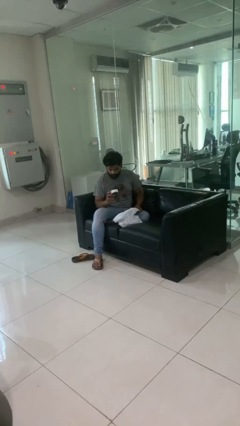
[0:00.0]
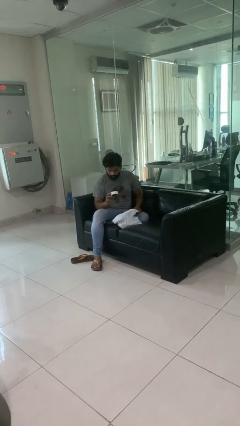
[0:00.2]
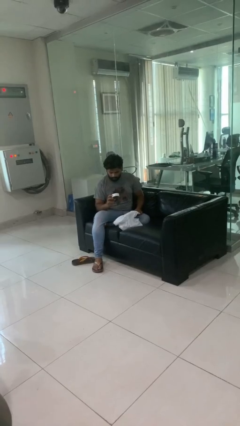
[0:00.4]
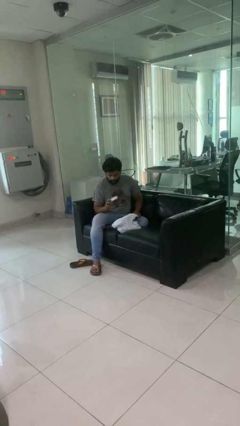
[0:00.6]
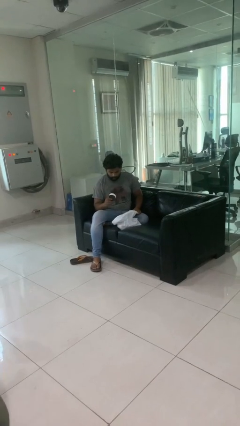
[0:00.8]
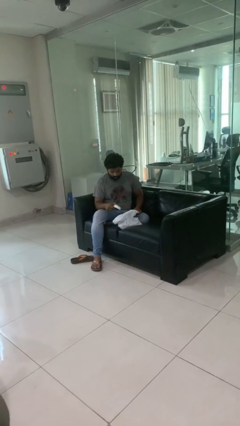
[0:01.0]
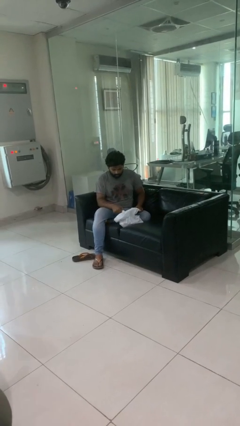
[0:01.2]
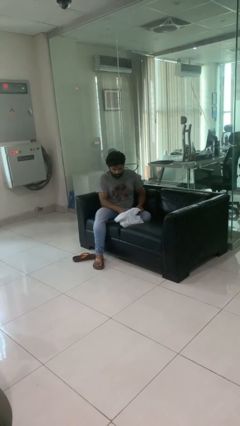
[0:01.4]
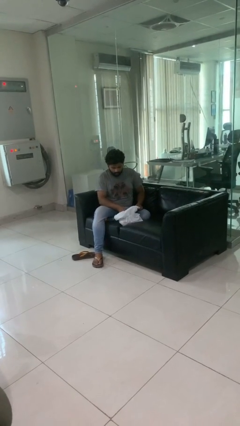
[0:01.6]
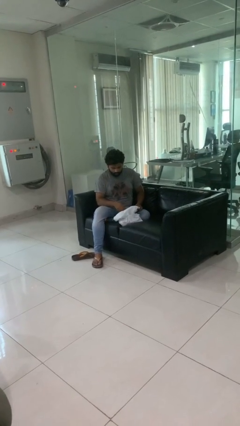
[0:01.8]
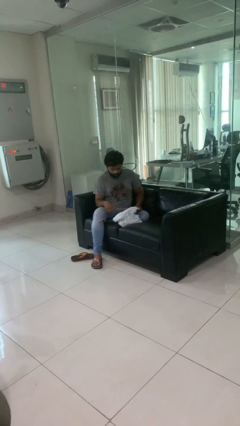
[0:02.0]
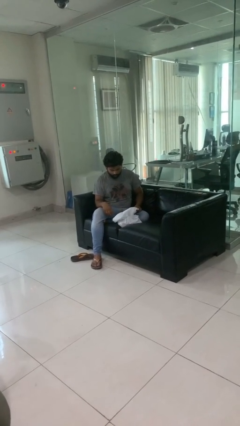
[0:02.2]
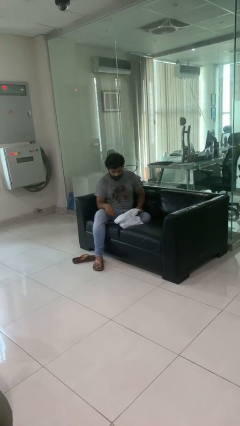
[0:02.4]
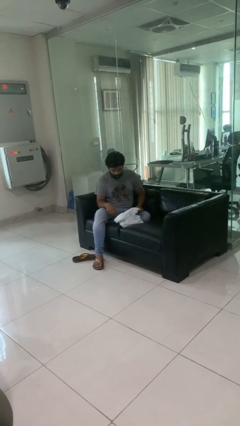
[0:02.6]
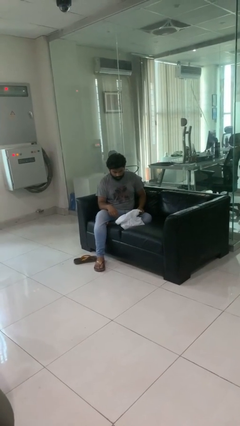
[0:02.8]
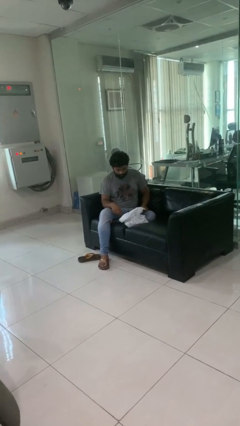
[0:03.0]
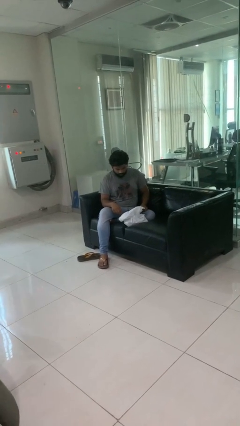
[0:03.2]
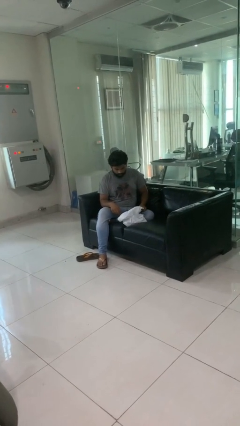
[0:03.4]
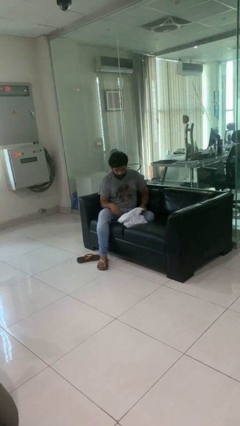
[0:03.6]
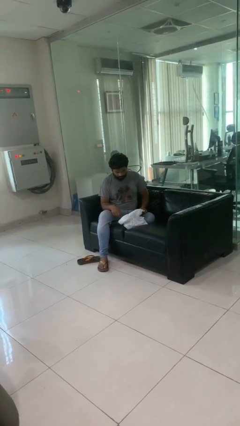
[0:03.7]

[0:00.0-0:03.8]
person puts object into bag

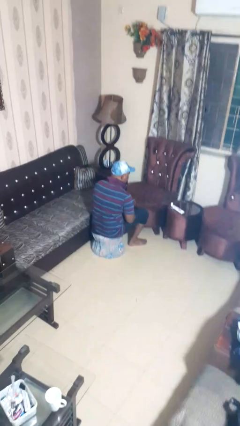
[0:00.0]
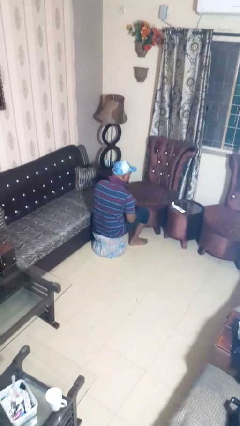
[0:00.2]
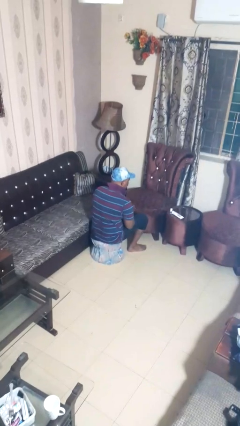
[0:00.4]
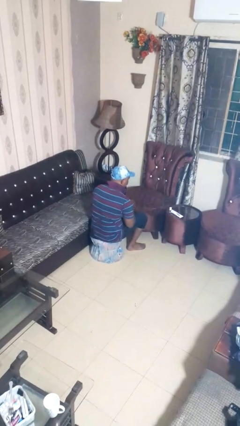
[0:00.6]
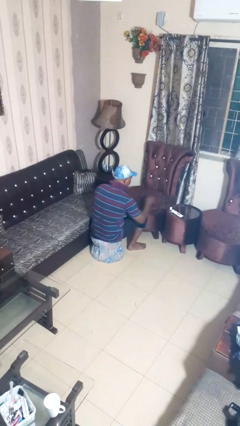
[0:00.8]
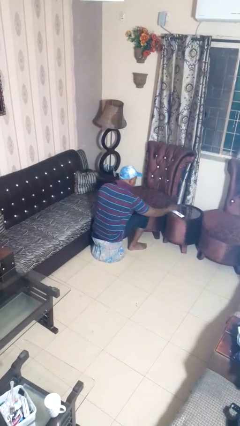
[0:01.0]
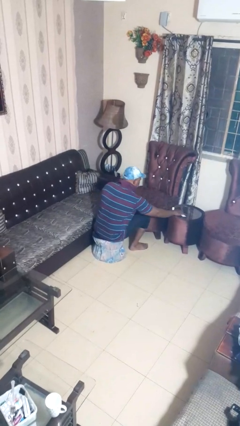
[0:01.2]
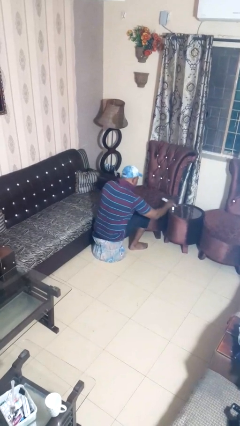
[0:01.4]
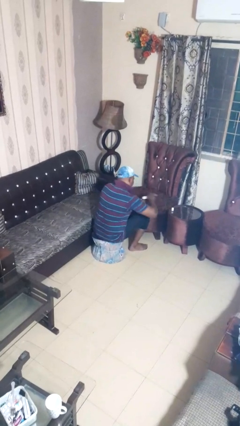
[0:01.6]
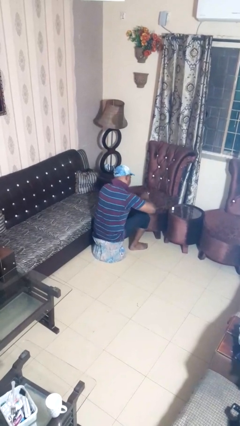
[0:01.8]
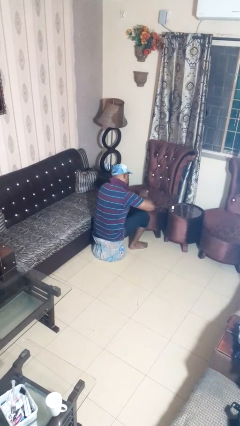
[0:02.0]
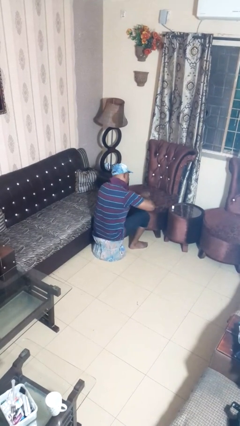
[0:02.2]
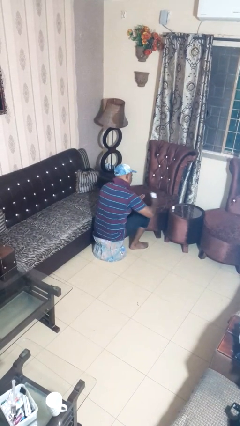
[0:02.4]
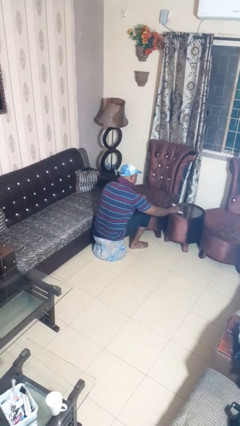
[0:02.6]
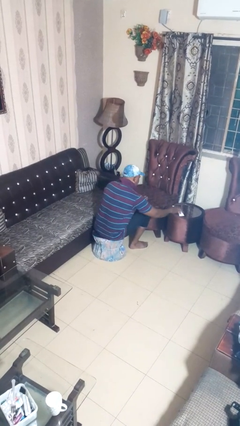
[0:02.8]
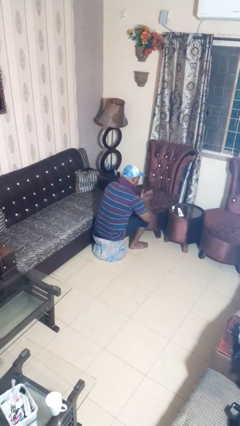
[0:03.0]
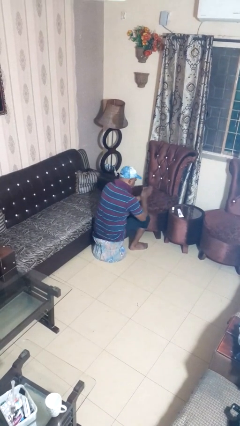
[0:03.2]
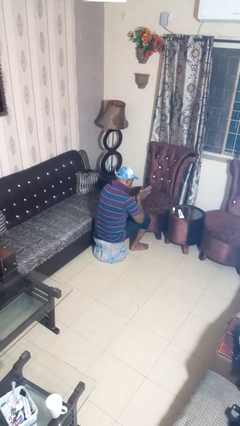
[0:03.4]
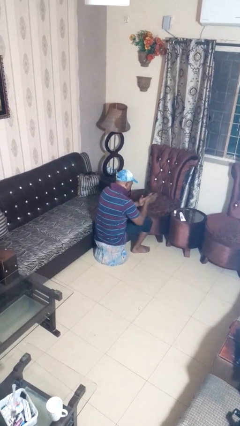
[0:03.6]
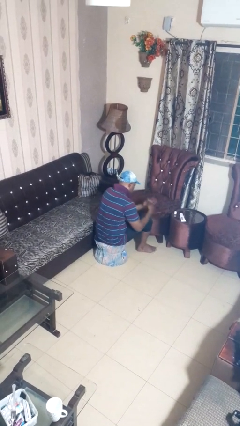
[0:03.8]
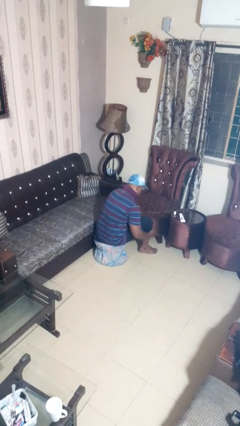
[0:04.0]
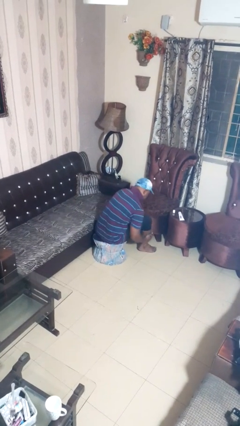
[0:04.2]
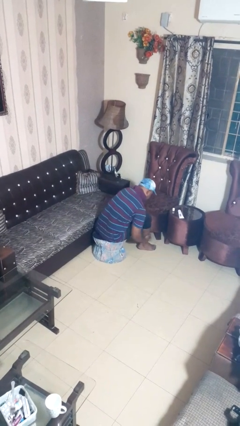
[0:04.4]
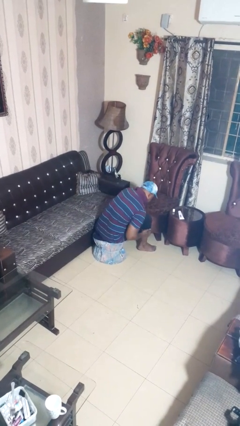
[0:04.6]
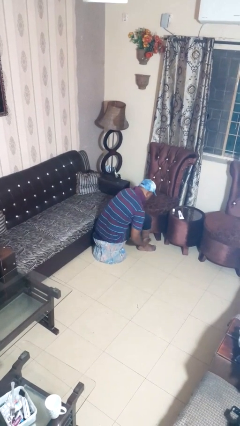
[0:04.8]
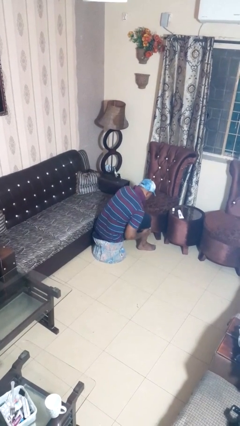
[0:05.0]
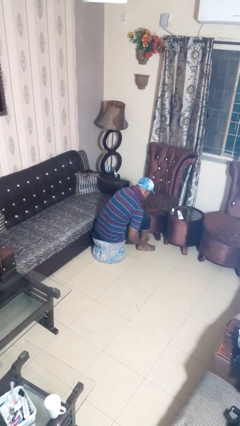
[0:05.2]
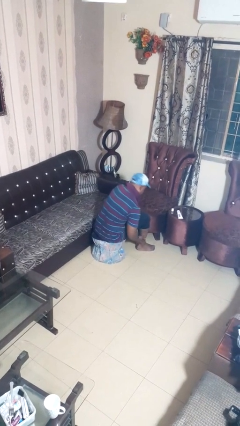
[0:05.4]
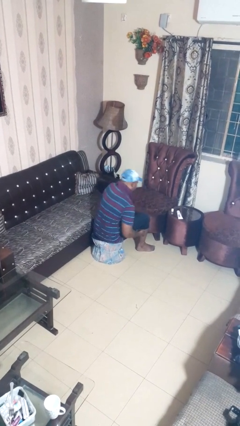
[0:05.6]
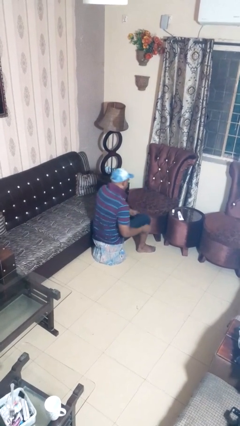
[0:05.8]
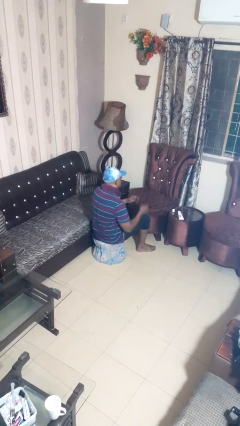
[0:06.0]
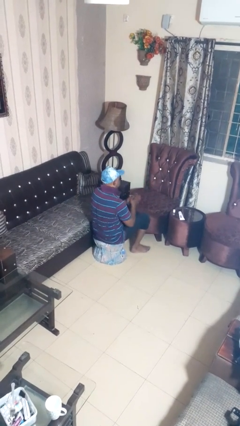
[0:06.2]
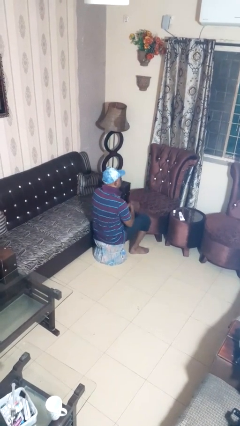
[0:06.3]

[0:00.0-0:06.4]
person applies sunscreen

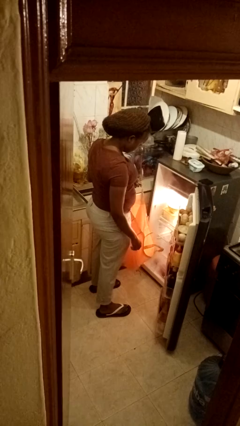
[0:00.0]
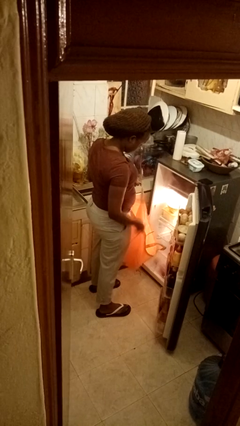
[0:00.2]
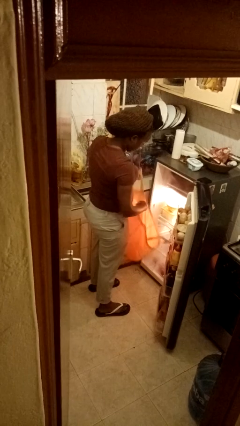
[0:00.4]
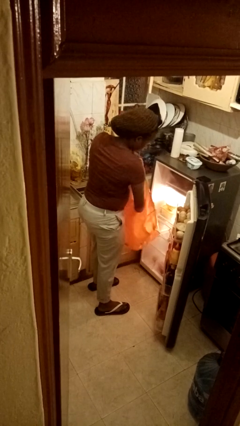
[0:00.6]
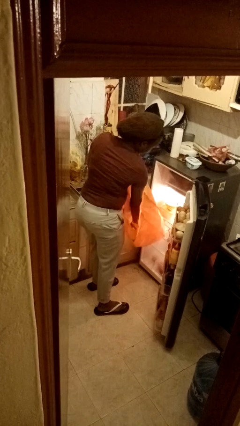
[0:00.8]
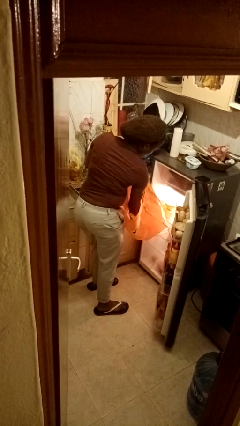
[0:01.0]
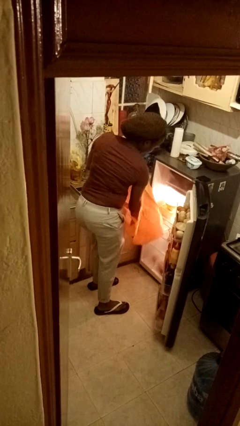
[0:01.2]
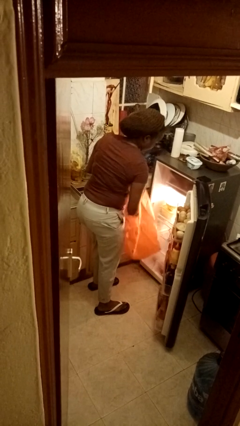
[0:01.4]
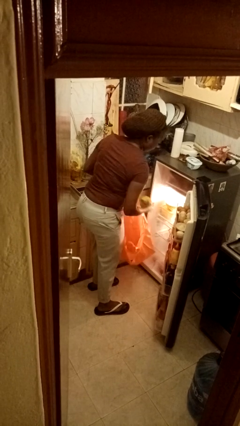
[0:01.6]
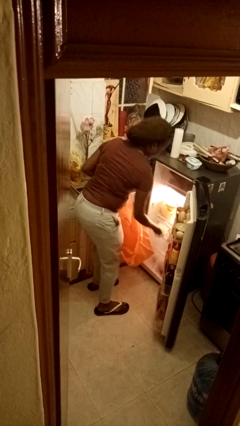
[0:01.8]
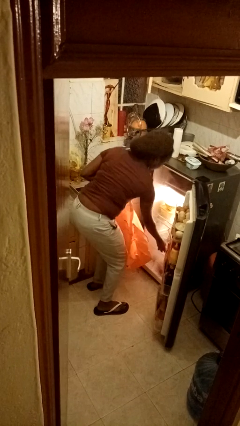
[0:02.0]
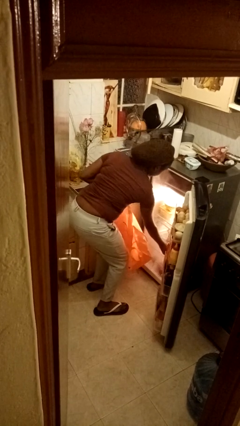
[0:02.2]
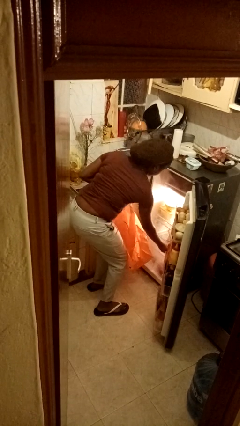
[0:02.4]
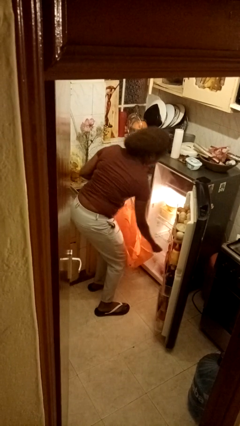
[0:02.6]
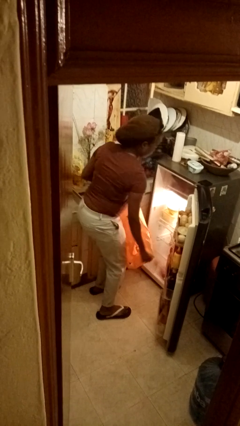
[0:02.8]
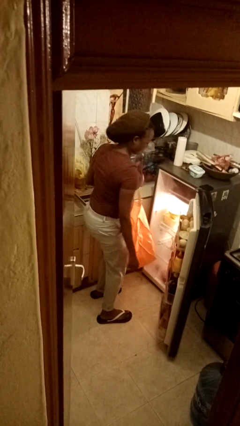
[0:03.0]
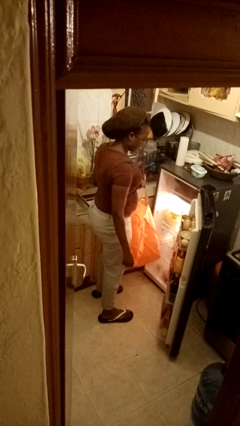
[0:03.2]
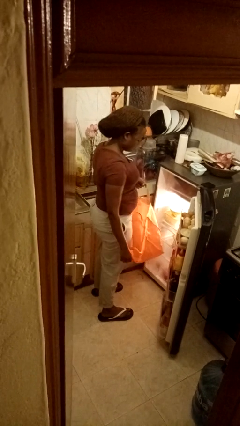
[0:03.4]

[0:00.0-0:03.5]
person loads groceries into refrigerator

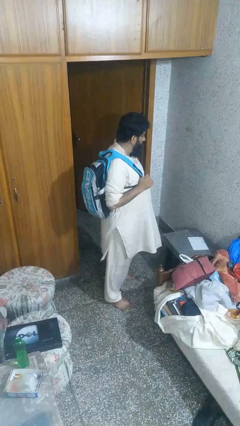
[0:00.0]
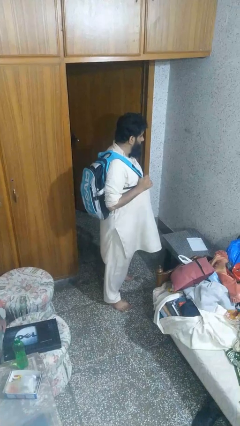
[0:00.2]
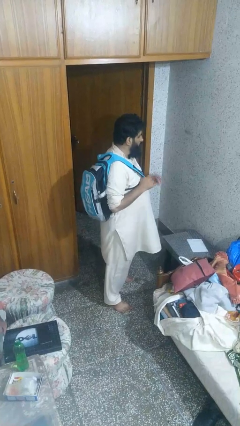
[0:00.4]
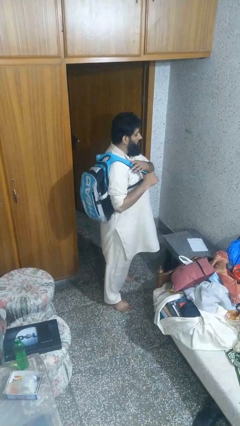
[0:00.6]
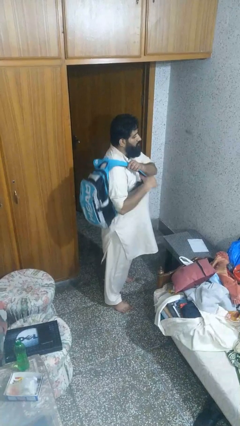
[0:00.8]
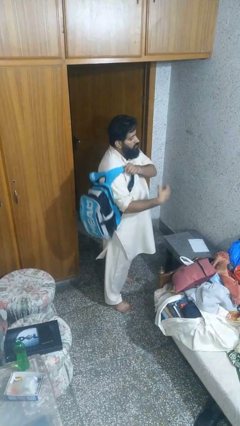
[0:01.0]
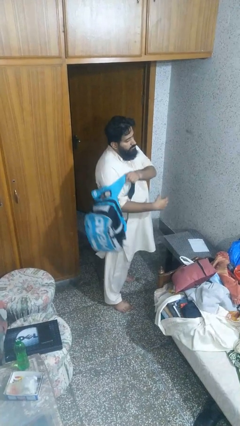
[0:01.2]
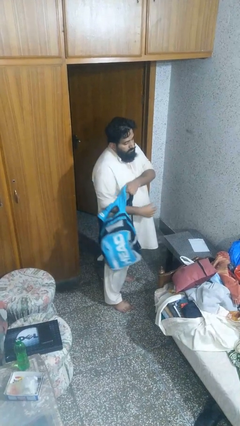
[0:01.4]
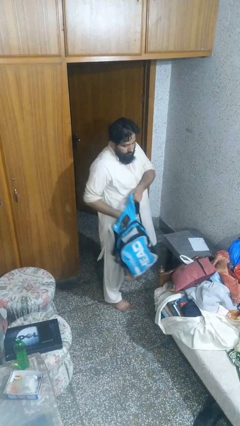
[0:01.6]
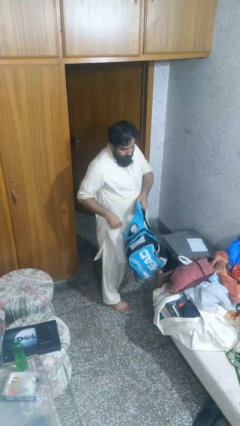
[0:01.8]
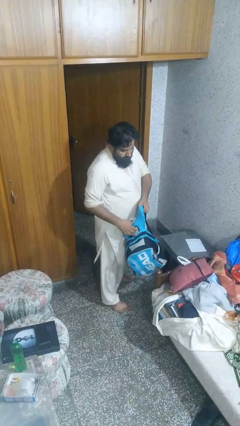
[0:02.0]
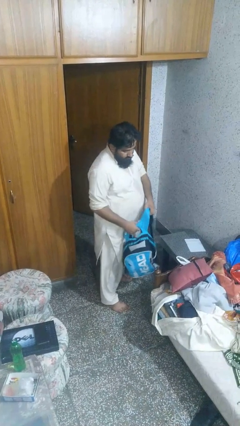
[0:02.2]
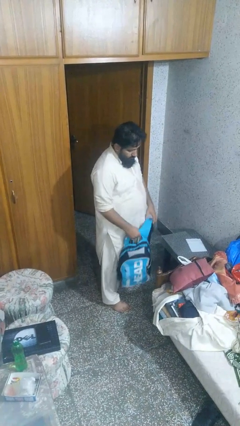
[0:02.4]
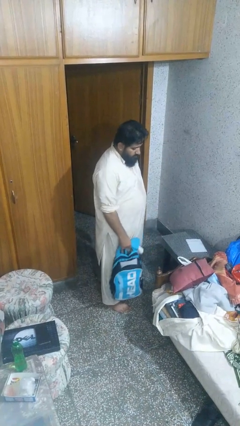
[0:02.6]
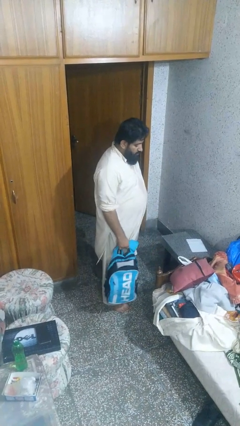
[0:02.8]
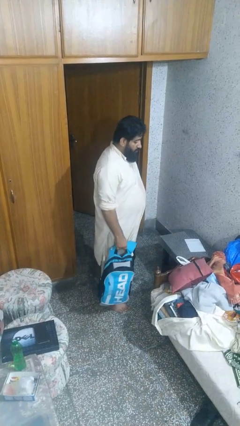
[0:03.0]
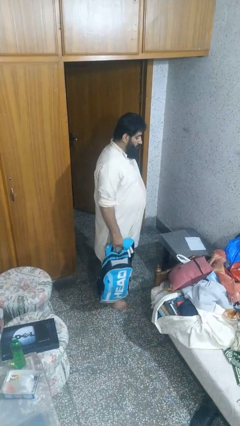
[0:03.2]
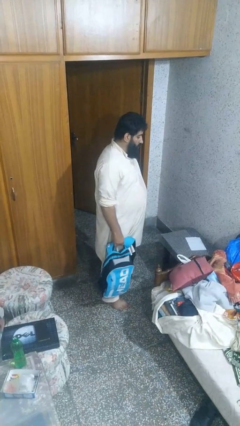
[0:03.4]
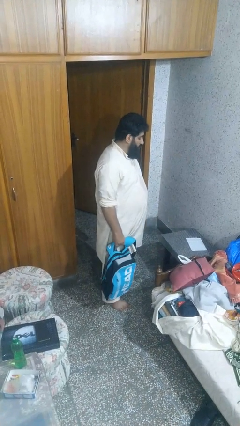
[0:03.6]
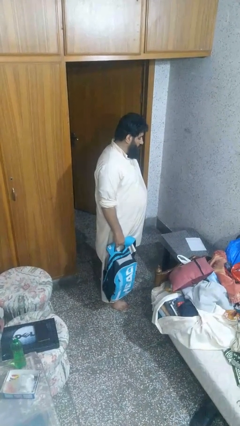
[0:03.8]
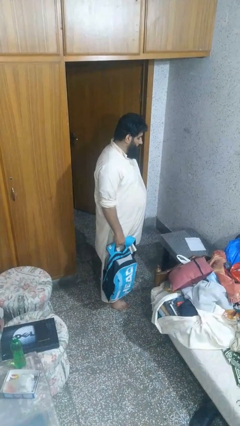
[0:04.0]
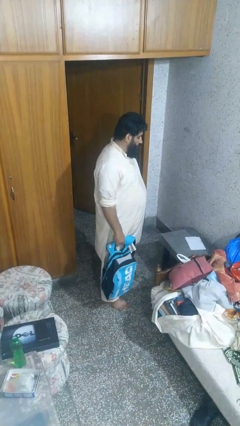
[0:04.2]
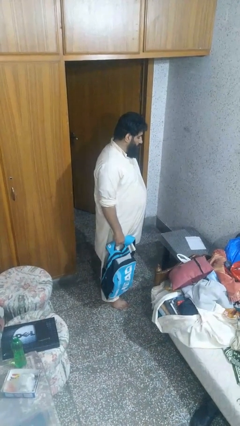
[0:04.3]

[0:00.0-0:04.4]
person takes off backpack

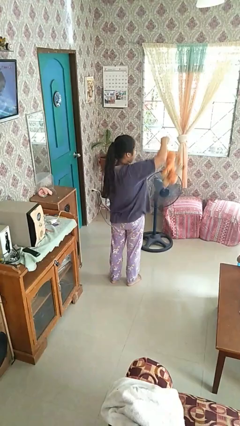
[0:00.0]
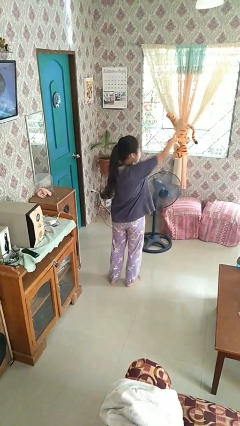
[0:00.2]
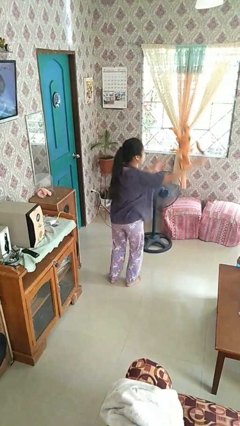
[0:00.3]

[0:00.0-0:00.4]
person drops object
